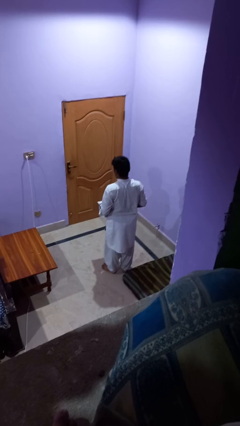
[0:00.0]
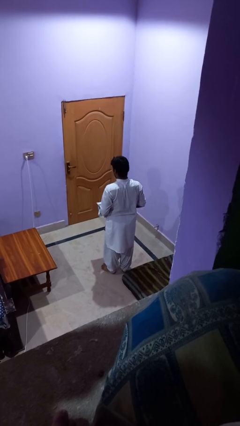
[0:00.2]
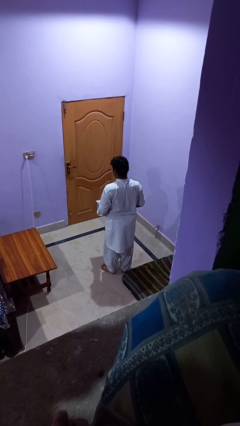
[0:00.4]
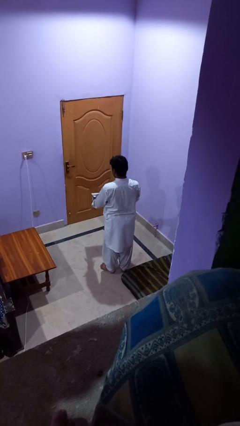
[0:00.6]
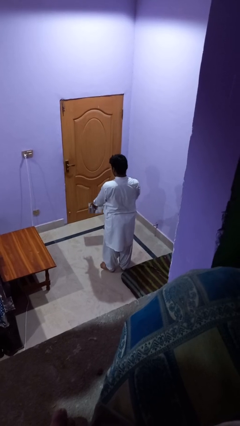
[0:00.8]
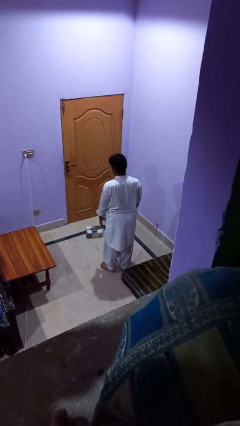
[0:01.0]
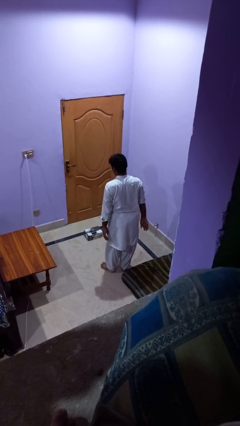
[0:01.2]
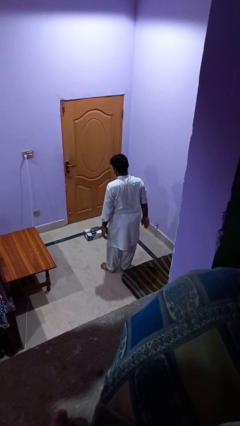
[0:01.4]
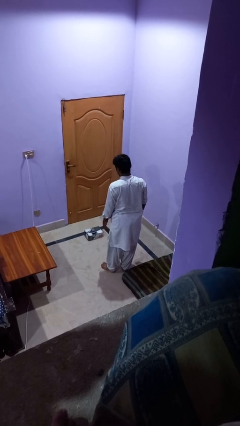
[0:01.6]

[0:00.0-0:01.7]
person throws object to ground

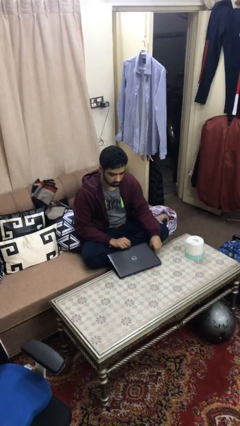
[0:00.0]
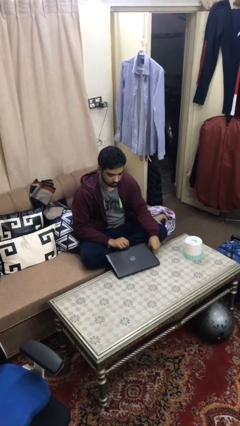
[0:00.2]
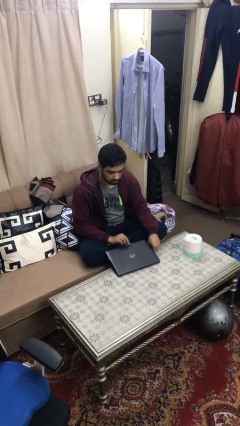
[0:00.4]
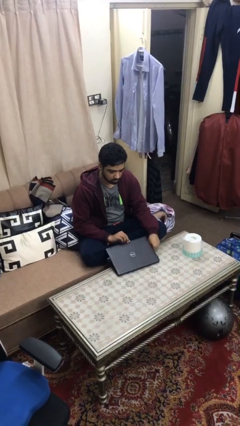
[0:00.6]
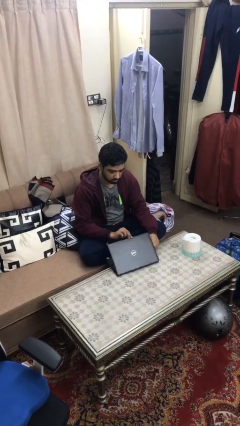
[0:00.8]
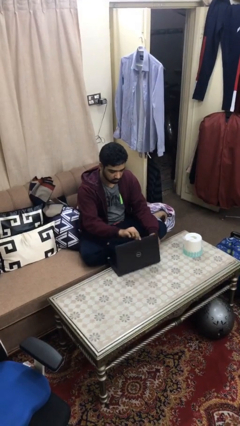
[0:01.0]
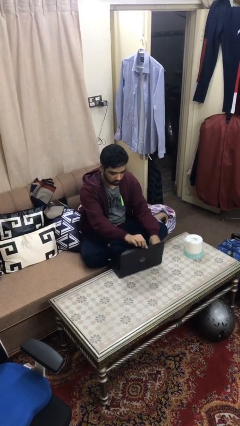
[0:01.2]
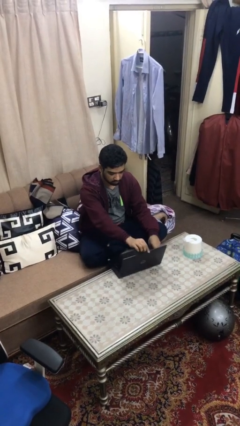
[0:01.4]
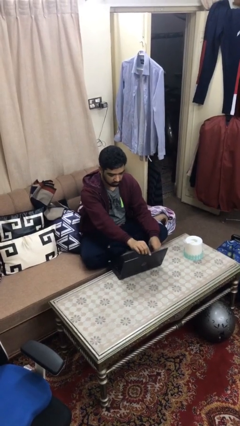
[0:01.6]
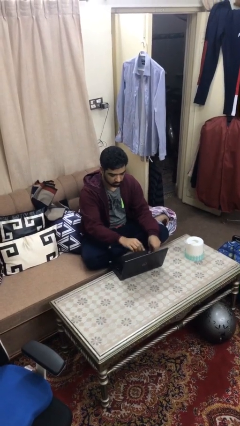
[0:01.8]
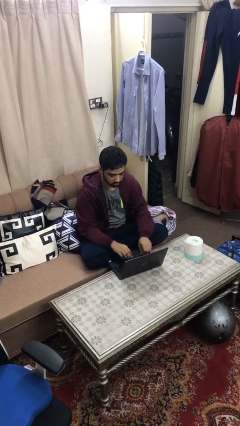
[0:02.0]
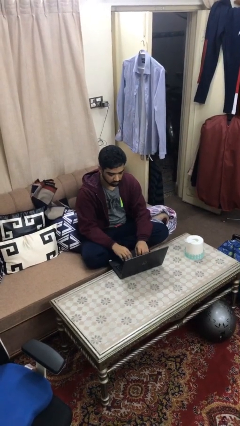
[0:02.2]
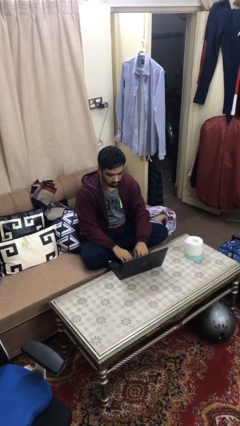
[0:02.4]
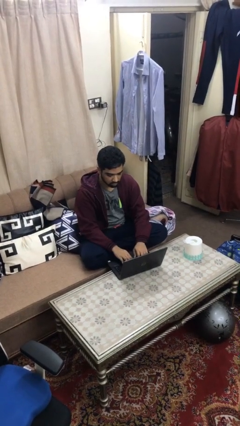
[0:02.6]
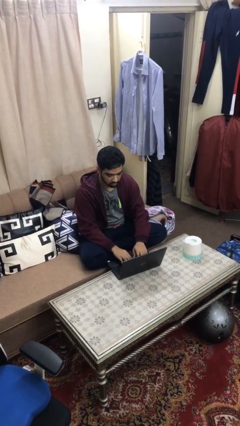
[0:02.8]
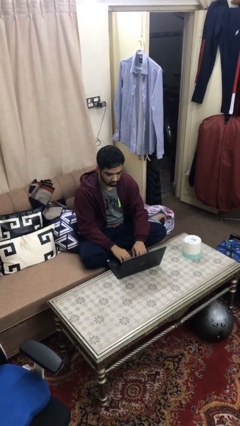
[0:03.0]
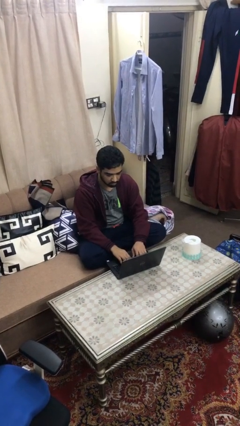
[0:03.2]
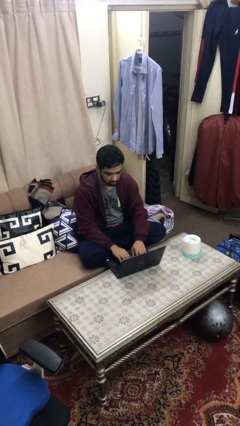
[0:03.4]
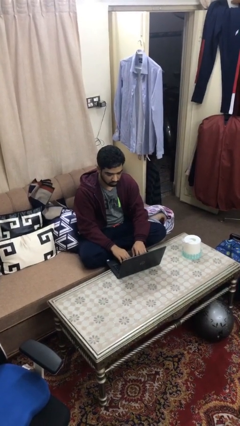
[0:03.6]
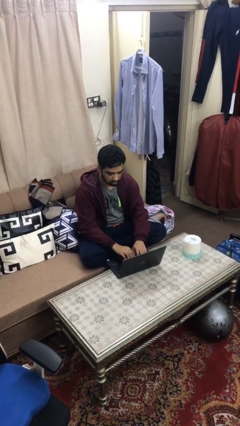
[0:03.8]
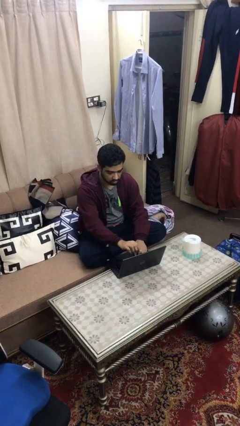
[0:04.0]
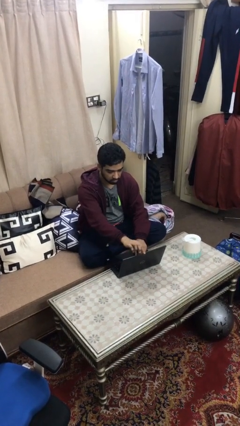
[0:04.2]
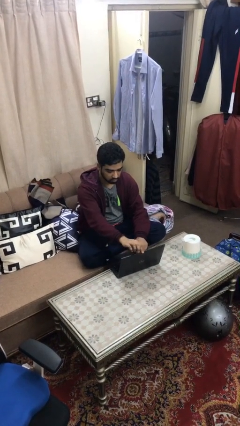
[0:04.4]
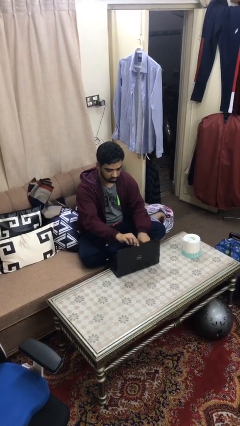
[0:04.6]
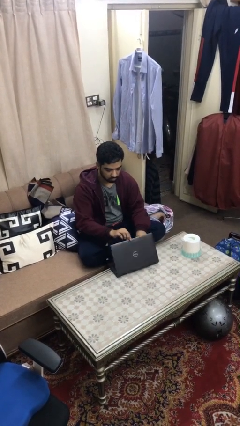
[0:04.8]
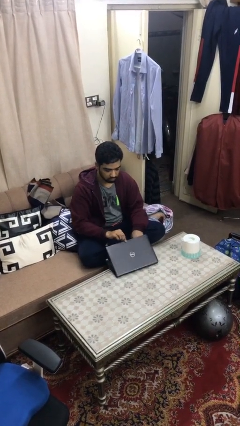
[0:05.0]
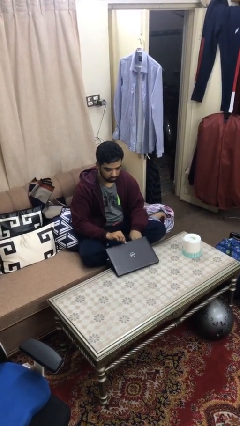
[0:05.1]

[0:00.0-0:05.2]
person interacts with laptop

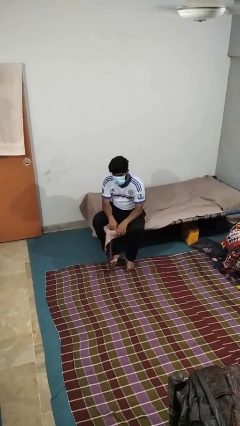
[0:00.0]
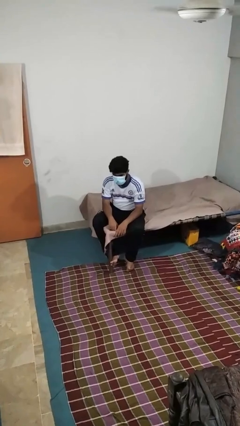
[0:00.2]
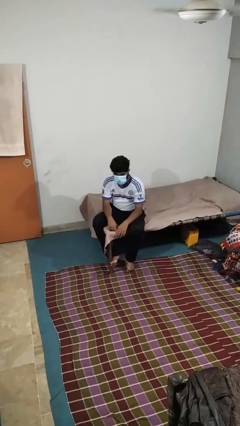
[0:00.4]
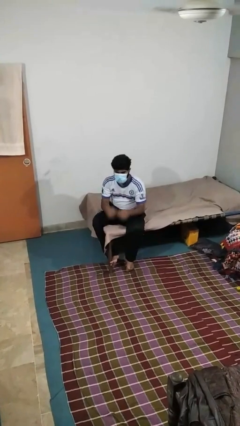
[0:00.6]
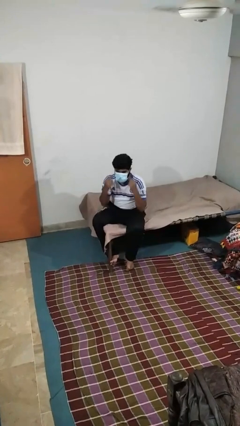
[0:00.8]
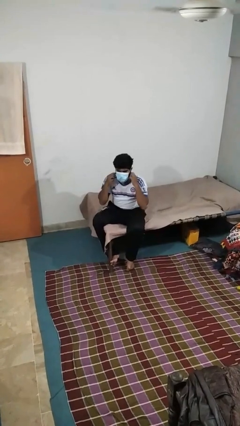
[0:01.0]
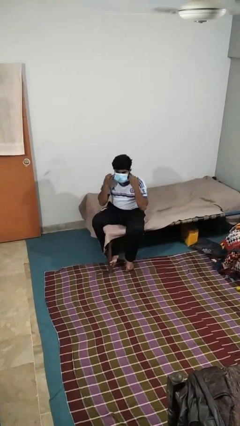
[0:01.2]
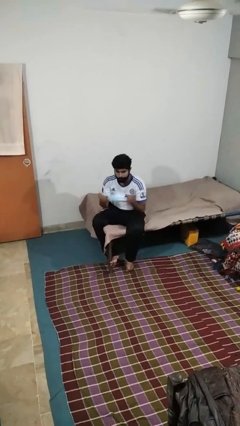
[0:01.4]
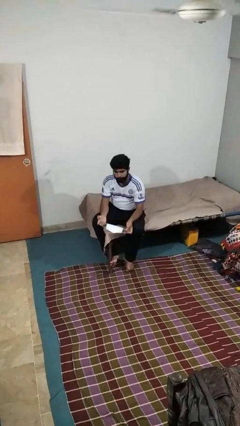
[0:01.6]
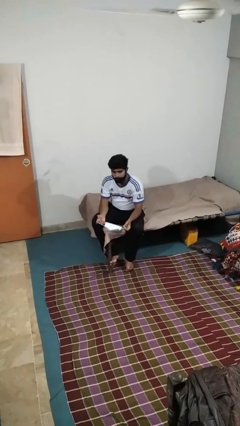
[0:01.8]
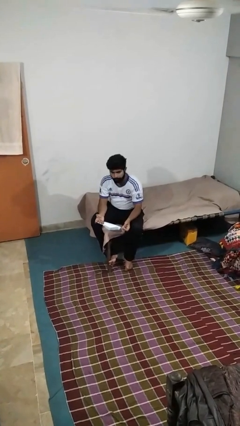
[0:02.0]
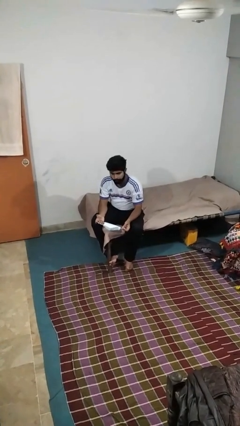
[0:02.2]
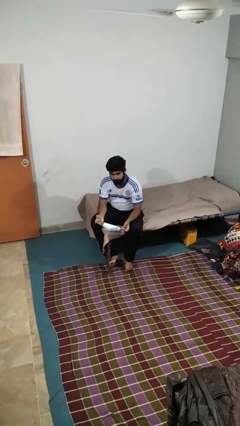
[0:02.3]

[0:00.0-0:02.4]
person takes off facemask

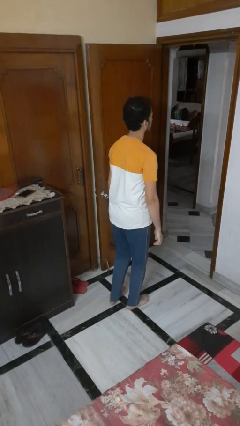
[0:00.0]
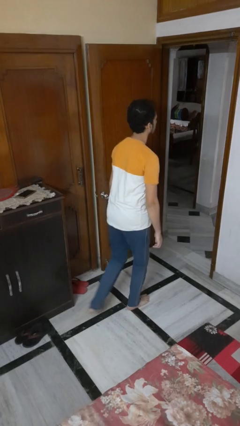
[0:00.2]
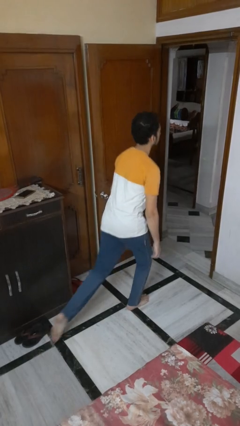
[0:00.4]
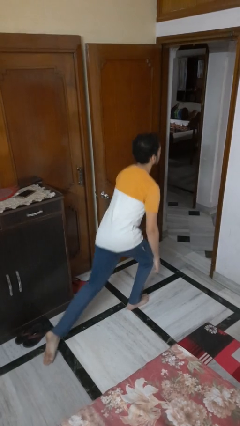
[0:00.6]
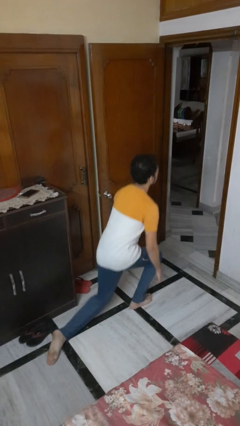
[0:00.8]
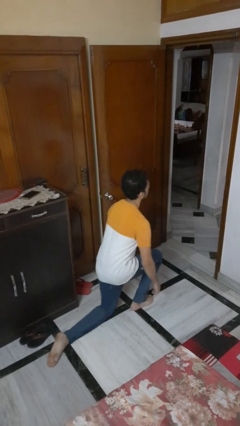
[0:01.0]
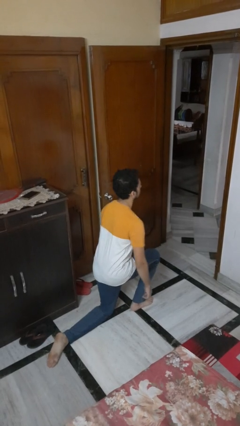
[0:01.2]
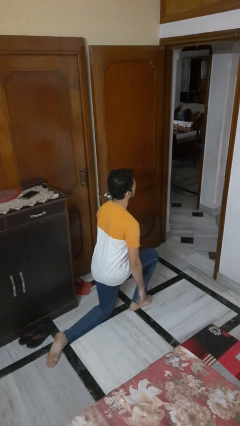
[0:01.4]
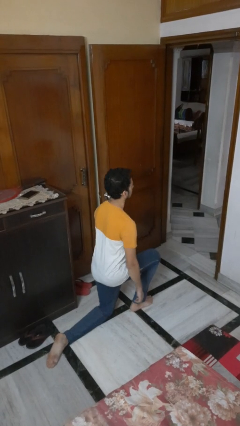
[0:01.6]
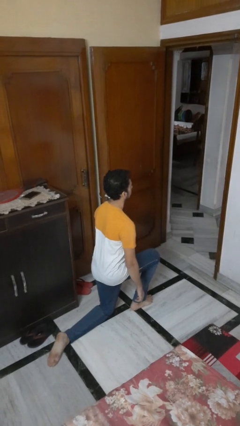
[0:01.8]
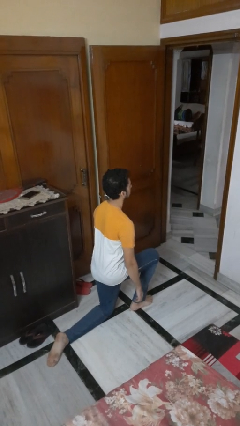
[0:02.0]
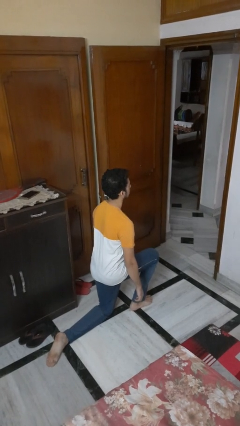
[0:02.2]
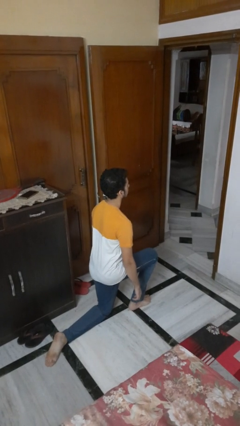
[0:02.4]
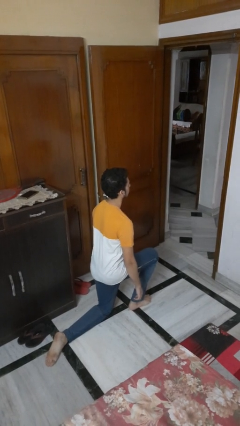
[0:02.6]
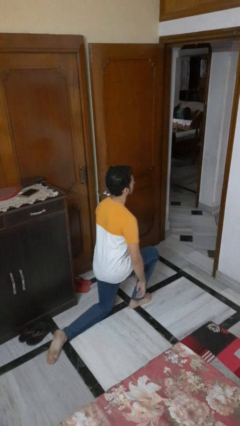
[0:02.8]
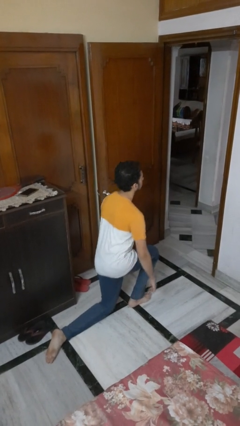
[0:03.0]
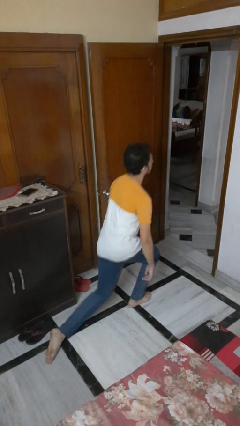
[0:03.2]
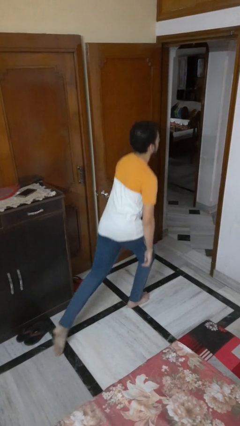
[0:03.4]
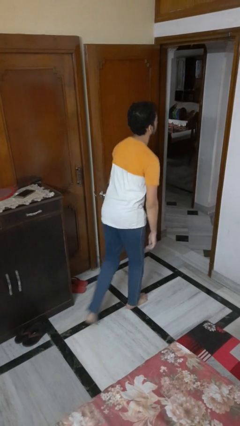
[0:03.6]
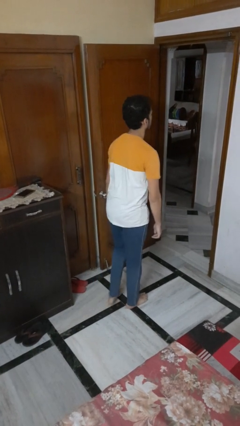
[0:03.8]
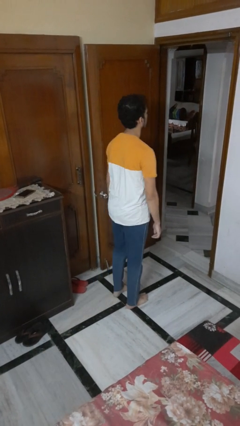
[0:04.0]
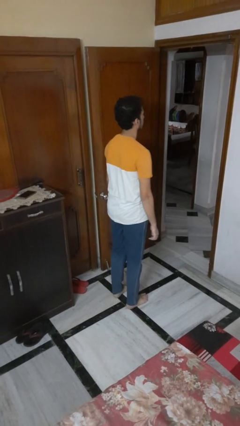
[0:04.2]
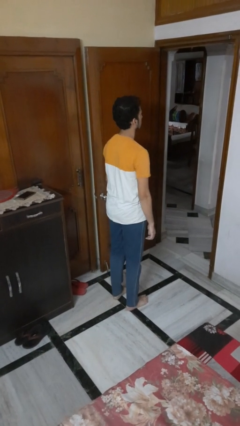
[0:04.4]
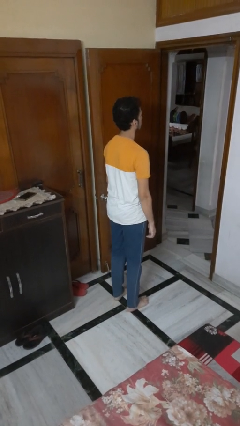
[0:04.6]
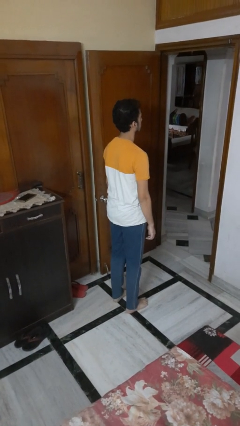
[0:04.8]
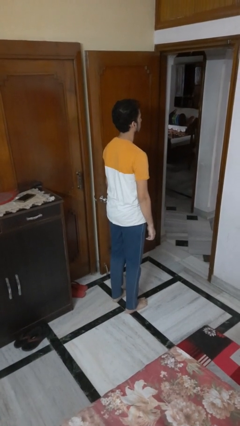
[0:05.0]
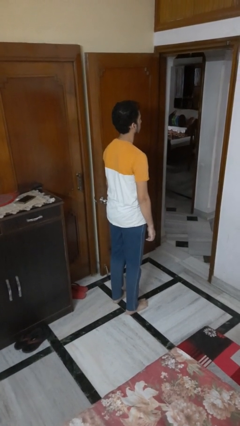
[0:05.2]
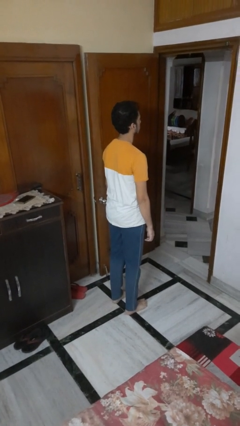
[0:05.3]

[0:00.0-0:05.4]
person kneels

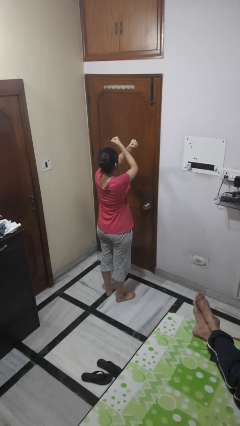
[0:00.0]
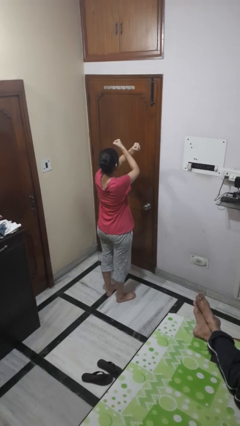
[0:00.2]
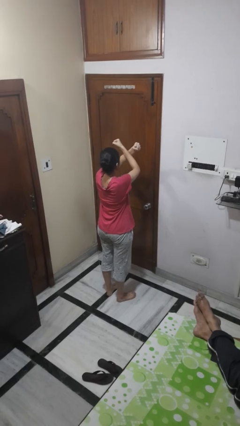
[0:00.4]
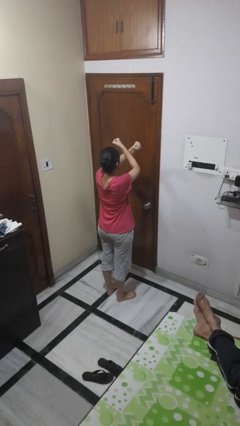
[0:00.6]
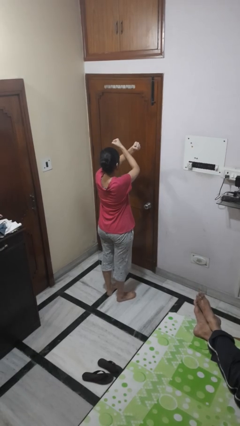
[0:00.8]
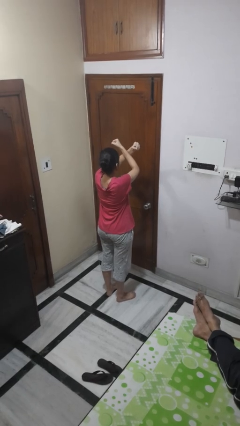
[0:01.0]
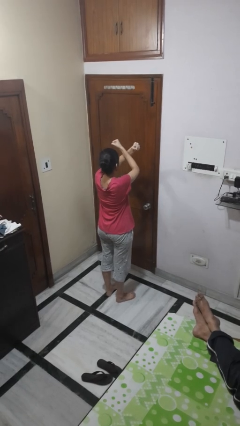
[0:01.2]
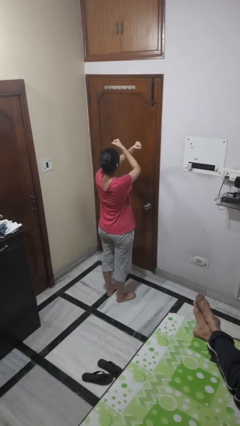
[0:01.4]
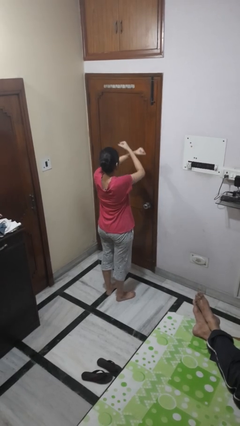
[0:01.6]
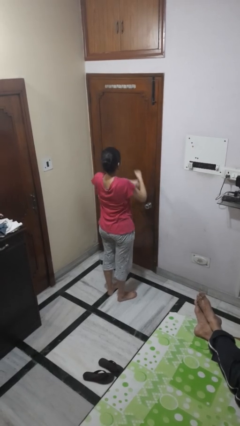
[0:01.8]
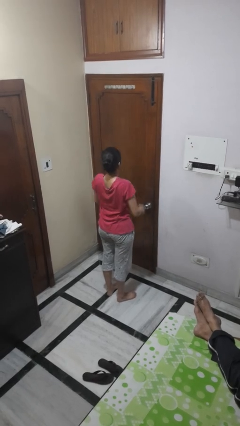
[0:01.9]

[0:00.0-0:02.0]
person gestures arms x

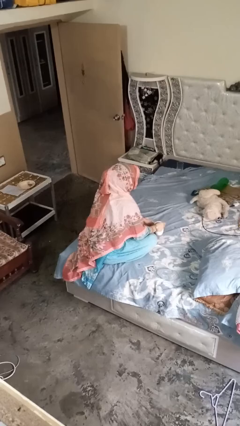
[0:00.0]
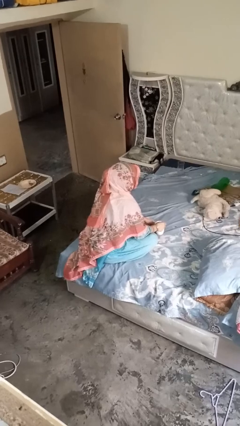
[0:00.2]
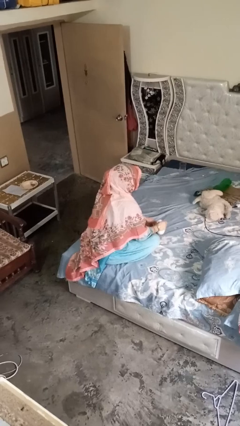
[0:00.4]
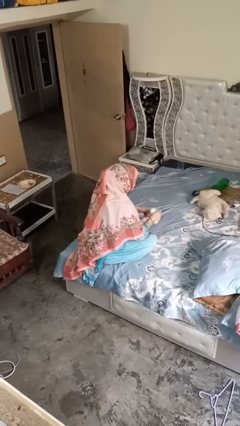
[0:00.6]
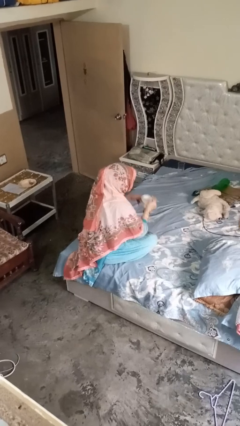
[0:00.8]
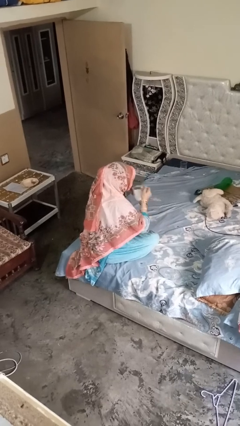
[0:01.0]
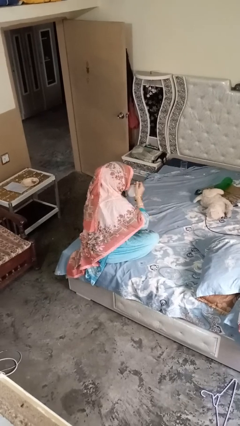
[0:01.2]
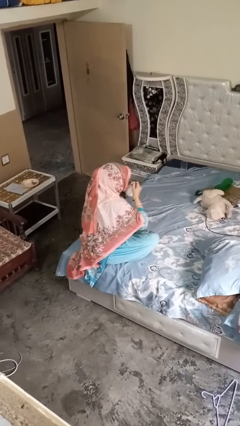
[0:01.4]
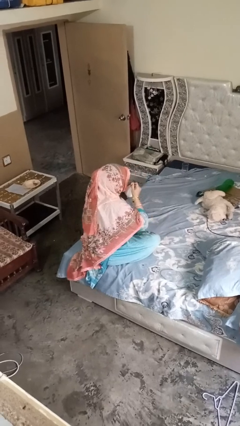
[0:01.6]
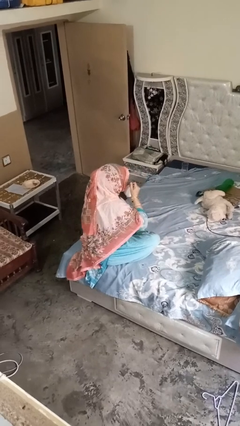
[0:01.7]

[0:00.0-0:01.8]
person drinks from mug
